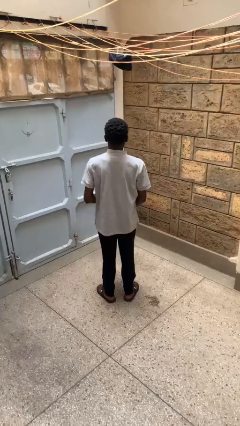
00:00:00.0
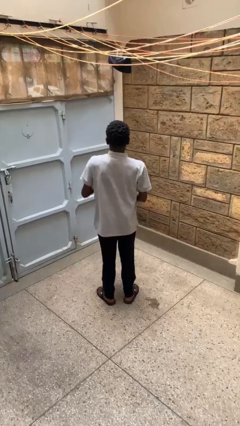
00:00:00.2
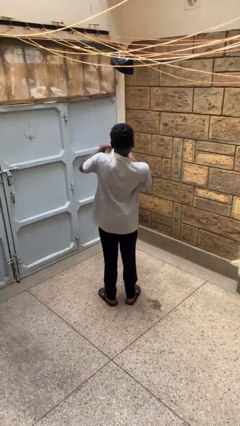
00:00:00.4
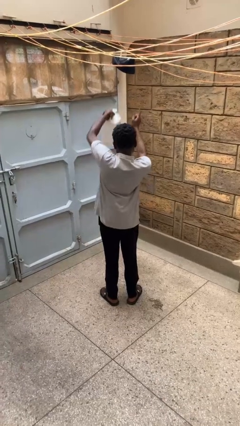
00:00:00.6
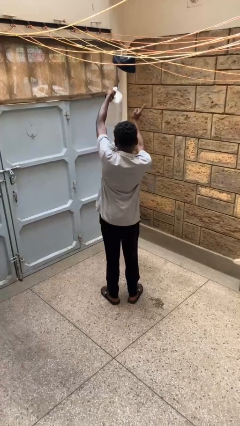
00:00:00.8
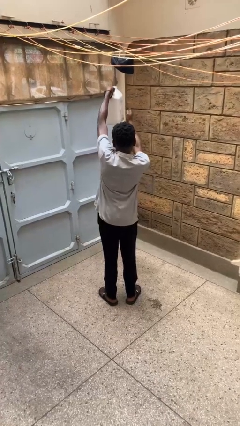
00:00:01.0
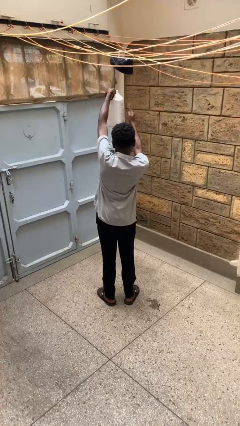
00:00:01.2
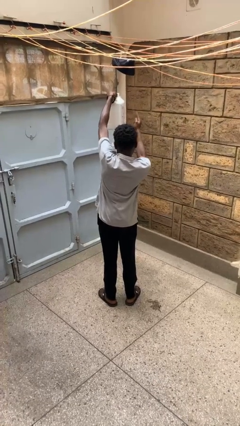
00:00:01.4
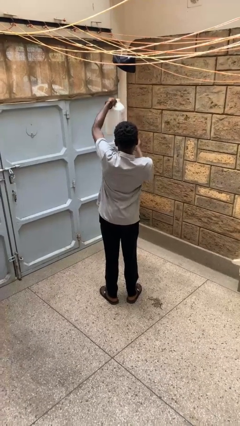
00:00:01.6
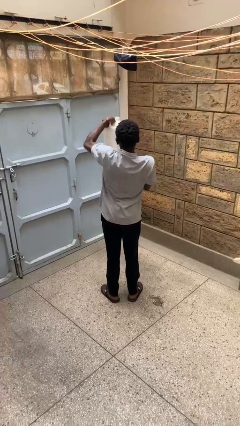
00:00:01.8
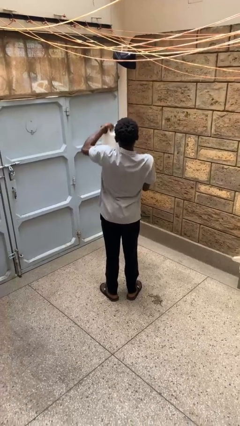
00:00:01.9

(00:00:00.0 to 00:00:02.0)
person taps object with finger

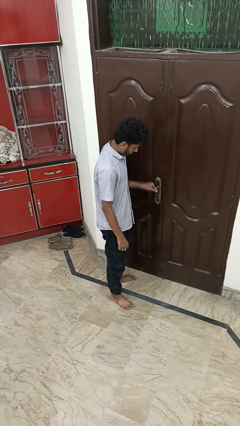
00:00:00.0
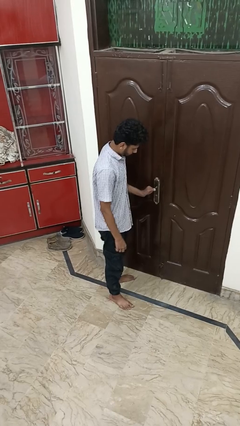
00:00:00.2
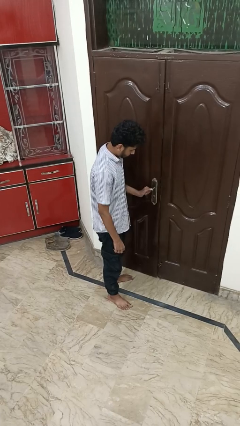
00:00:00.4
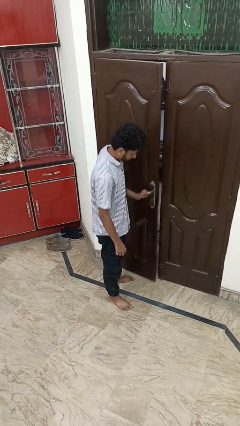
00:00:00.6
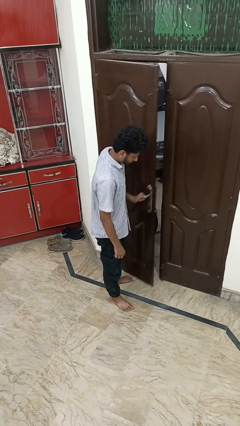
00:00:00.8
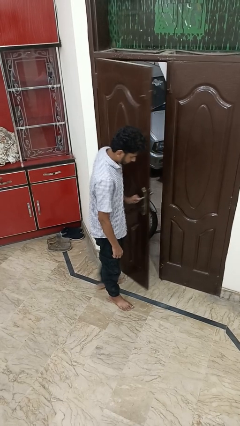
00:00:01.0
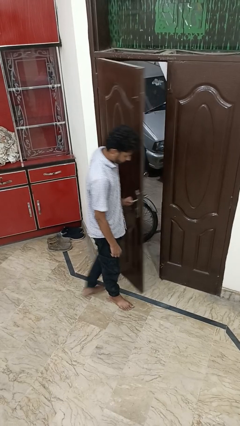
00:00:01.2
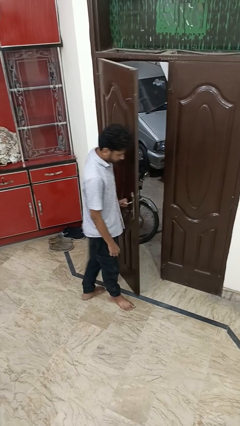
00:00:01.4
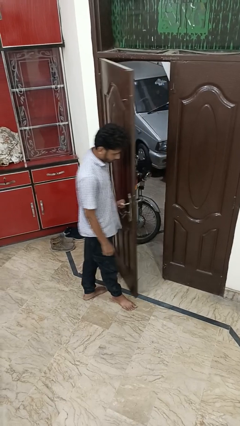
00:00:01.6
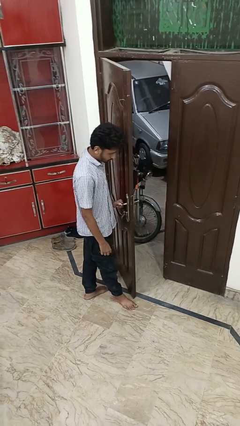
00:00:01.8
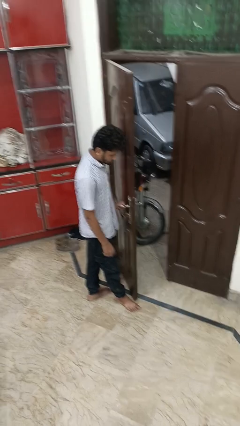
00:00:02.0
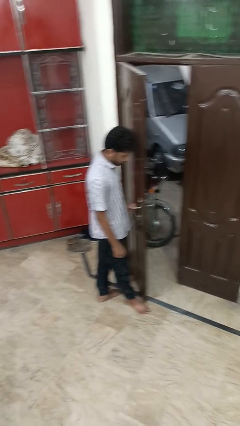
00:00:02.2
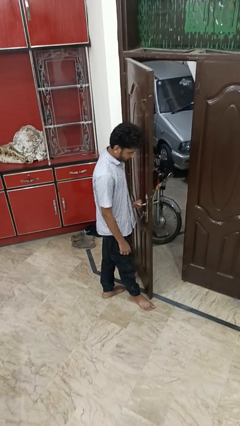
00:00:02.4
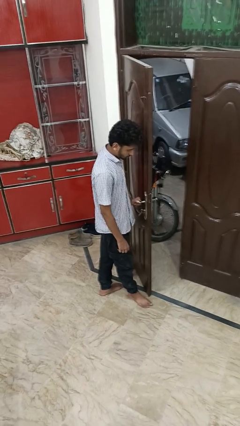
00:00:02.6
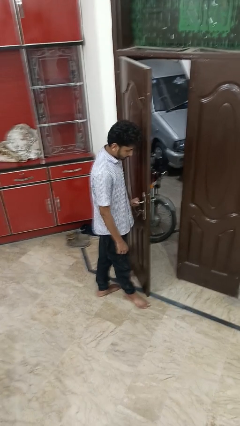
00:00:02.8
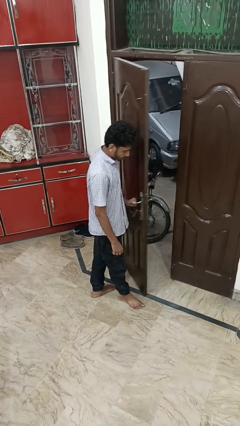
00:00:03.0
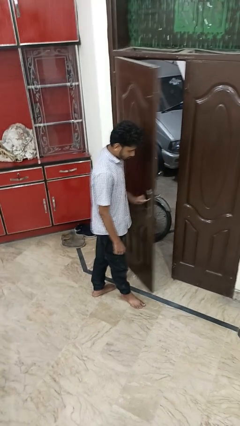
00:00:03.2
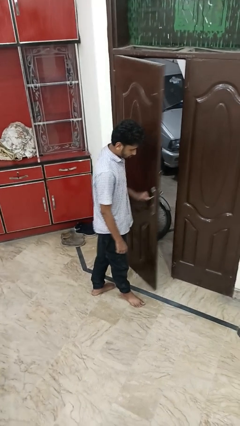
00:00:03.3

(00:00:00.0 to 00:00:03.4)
person opens facility door

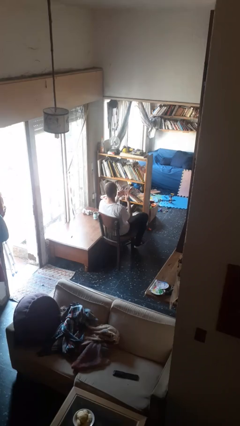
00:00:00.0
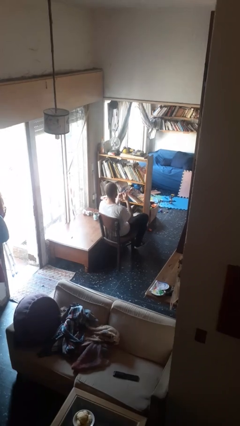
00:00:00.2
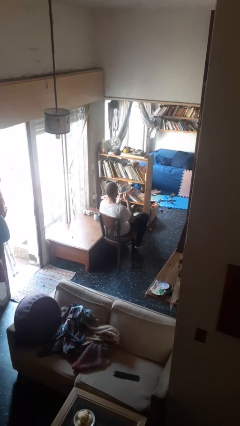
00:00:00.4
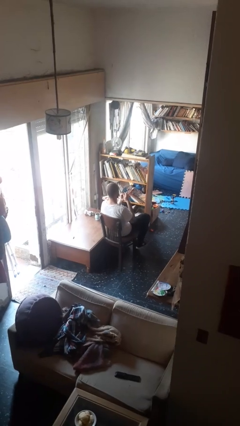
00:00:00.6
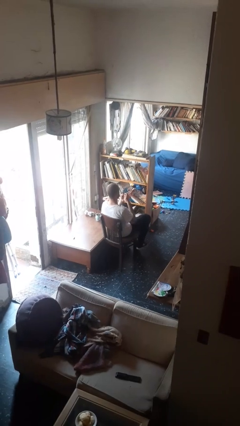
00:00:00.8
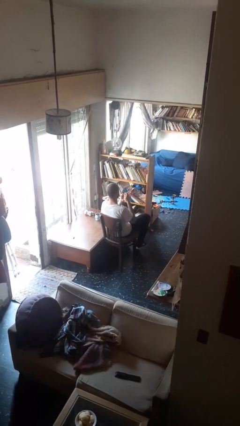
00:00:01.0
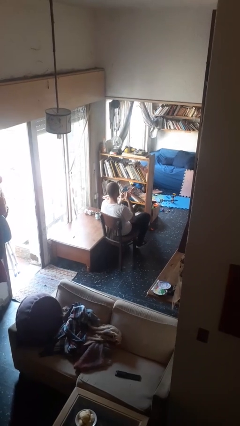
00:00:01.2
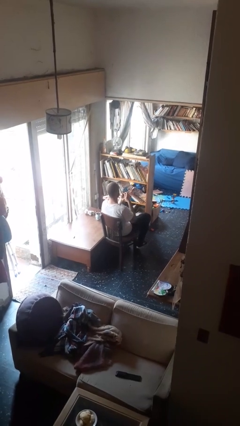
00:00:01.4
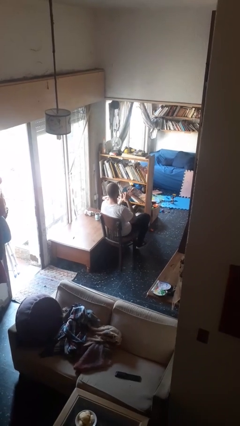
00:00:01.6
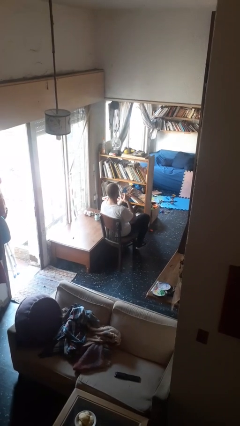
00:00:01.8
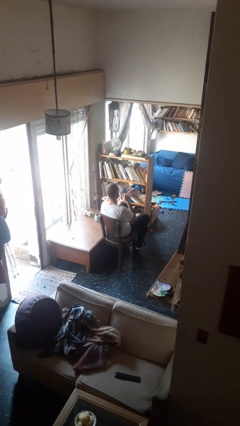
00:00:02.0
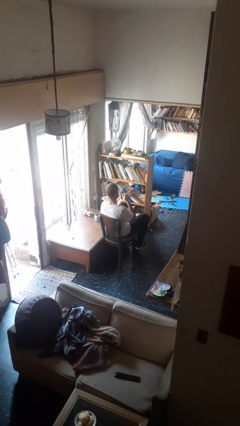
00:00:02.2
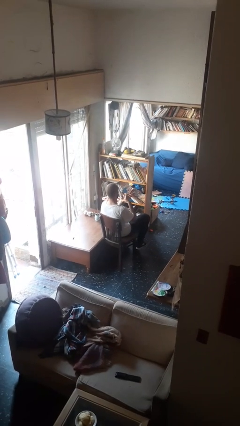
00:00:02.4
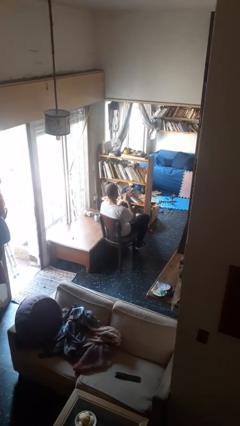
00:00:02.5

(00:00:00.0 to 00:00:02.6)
person files fingernails

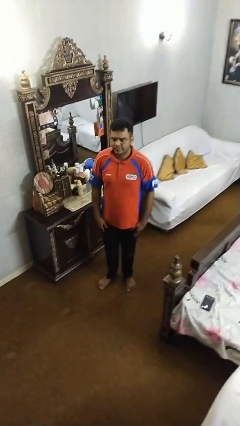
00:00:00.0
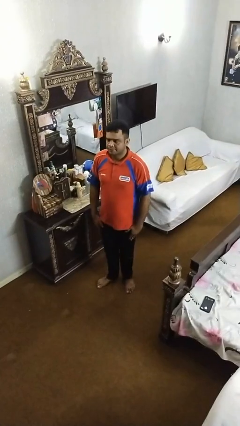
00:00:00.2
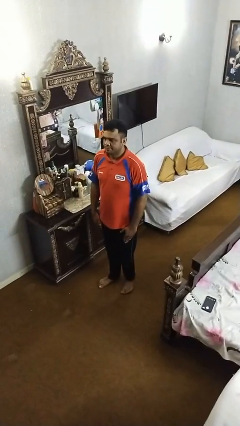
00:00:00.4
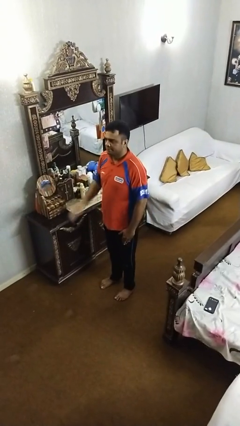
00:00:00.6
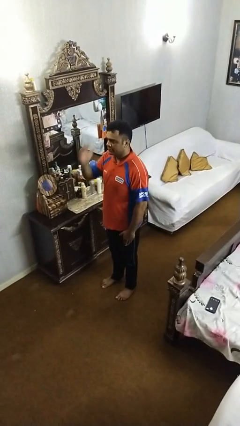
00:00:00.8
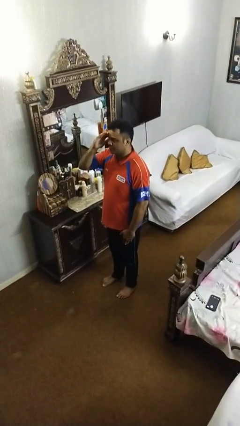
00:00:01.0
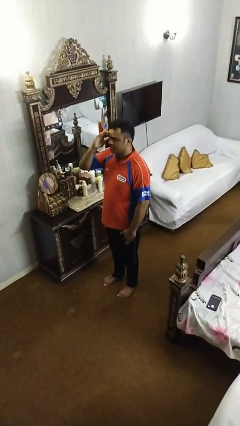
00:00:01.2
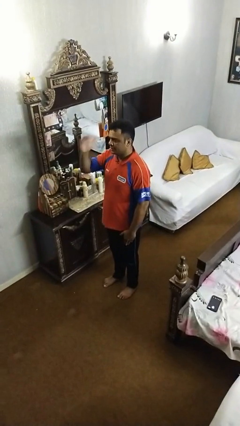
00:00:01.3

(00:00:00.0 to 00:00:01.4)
person salutes

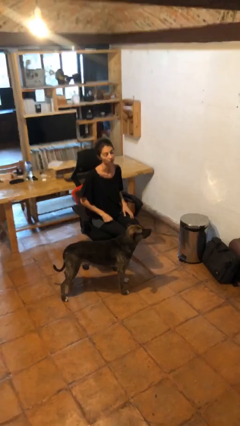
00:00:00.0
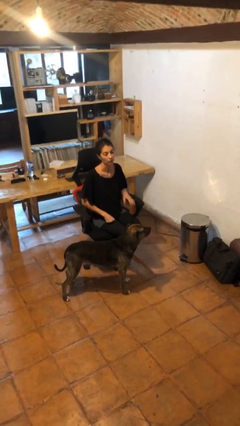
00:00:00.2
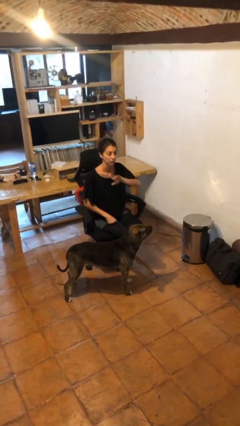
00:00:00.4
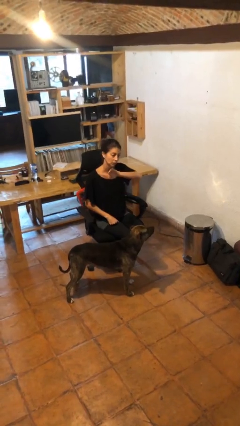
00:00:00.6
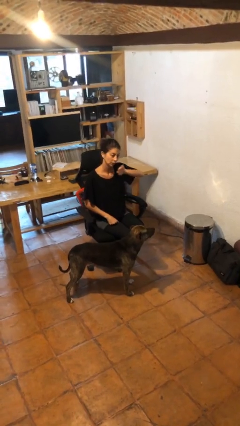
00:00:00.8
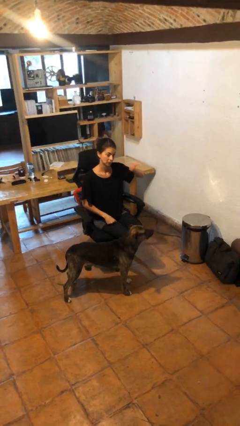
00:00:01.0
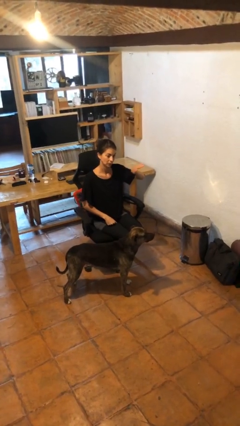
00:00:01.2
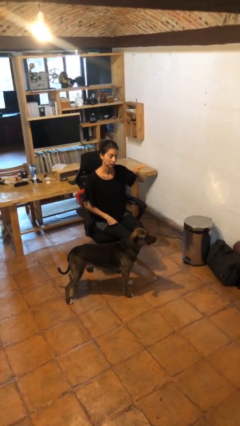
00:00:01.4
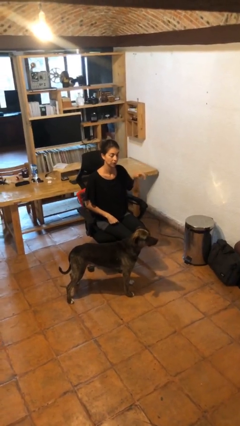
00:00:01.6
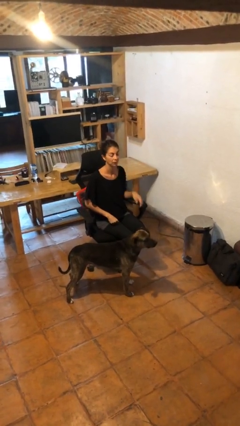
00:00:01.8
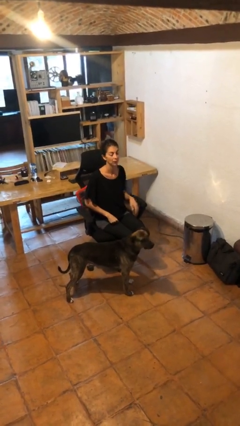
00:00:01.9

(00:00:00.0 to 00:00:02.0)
person gestures swipe left

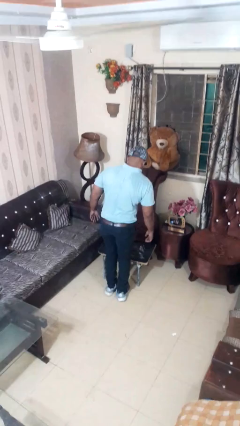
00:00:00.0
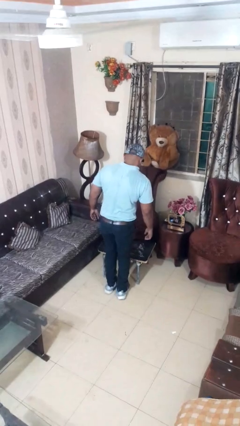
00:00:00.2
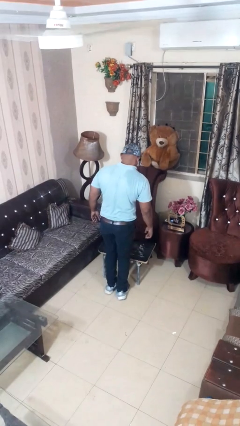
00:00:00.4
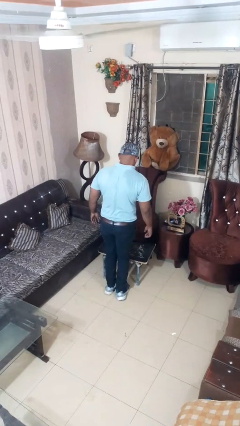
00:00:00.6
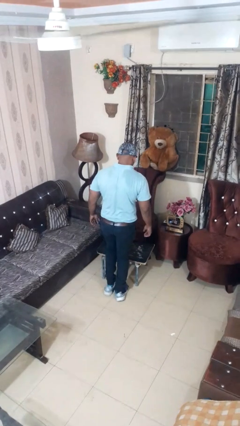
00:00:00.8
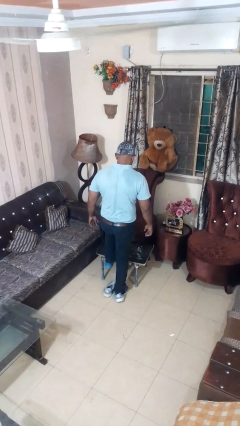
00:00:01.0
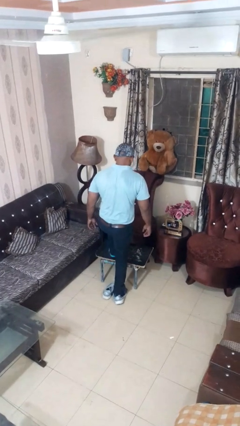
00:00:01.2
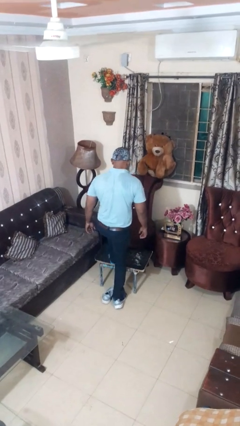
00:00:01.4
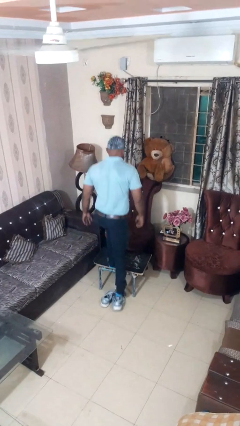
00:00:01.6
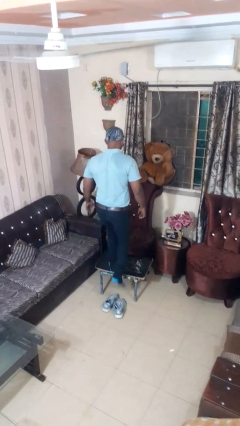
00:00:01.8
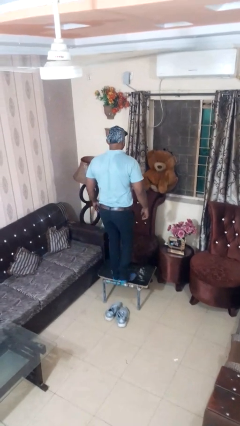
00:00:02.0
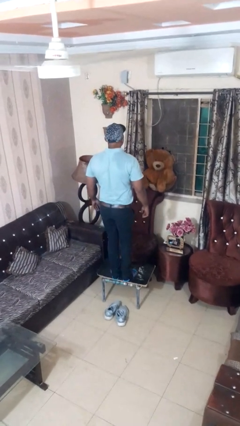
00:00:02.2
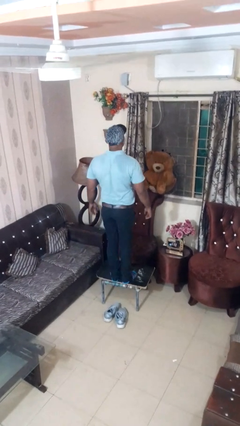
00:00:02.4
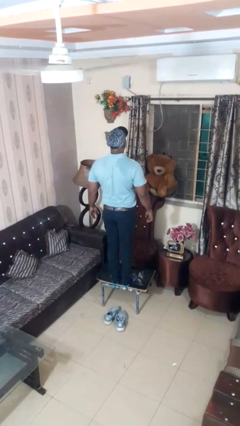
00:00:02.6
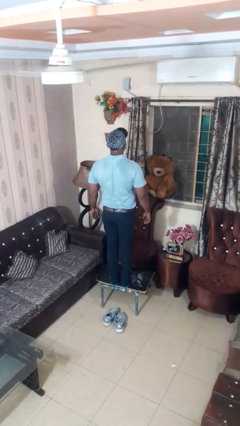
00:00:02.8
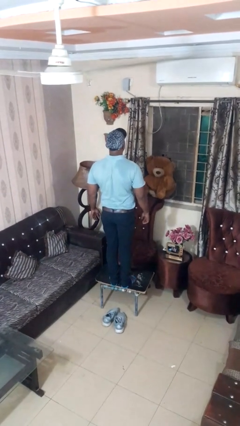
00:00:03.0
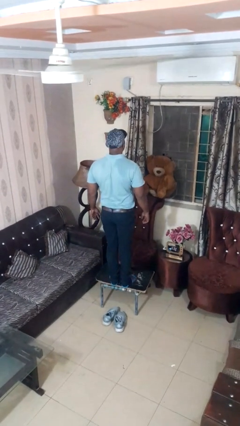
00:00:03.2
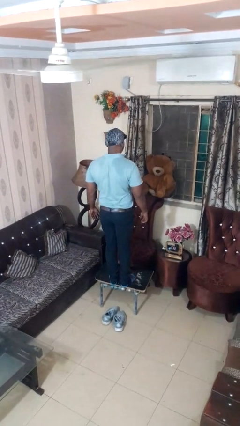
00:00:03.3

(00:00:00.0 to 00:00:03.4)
person climbs on table

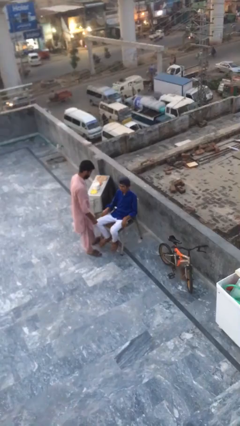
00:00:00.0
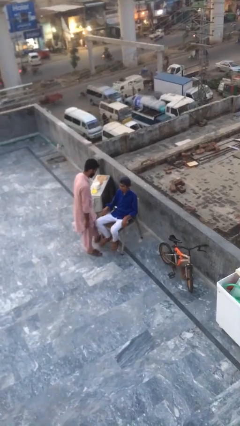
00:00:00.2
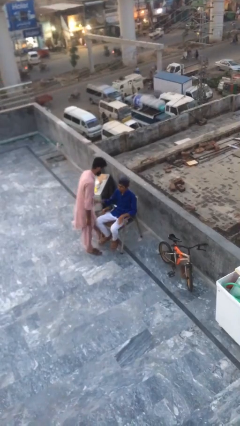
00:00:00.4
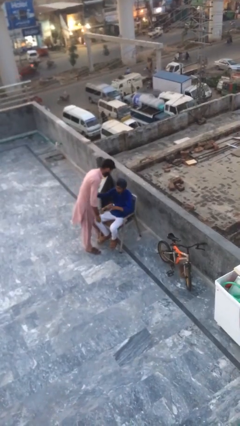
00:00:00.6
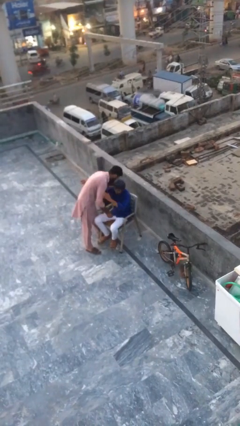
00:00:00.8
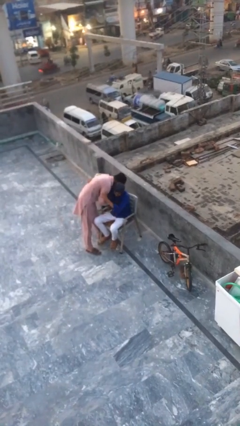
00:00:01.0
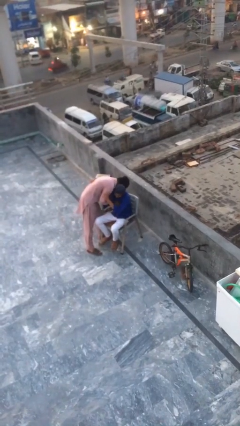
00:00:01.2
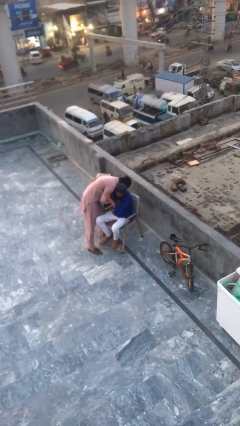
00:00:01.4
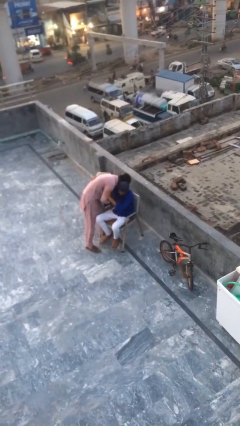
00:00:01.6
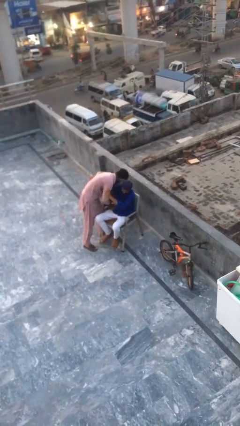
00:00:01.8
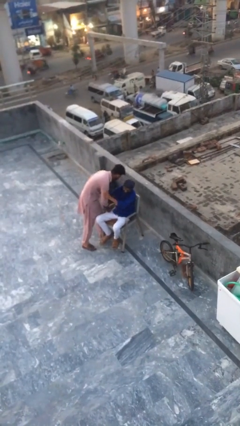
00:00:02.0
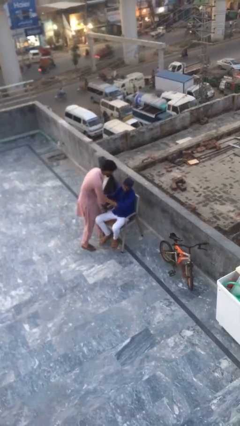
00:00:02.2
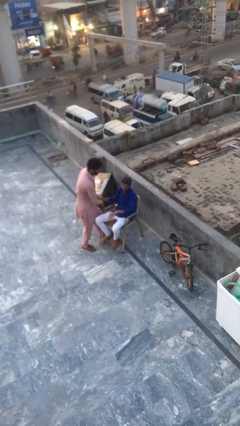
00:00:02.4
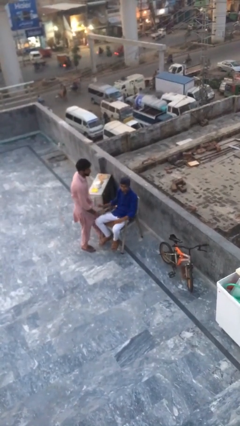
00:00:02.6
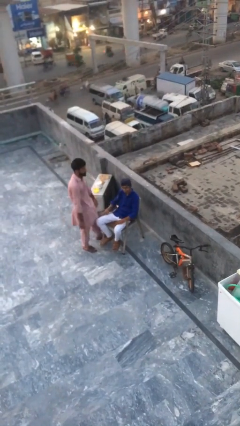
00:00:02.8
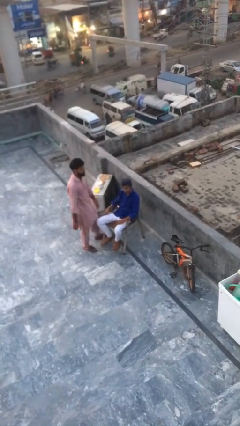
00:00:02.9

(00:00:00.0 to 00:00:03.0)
person embraces person
